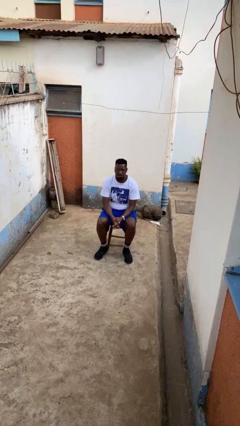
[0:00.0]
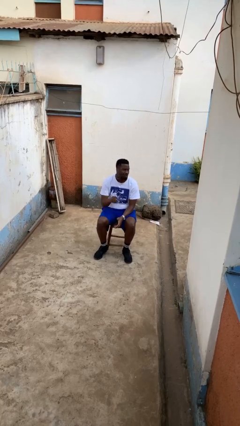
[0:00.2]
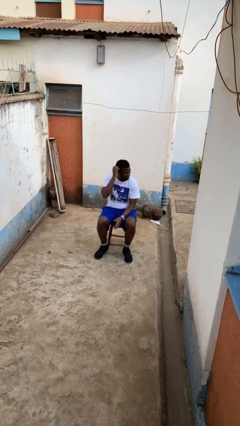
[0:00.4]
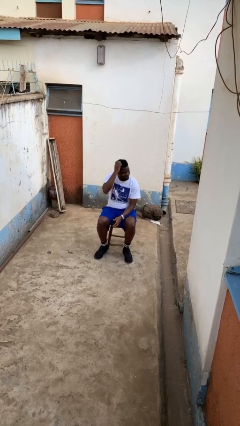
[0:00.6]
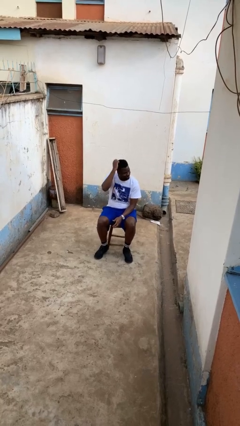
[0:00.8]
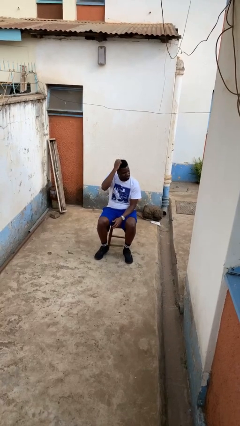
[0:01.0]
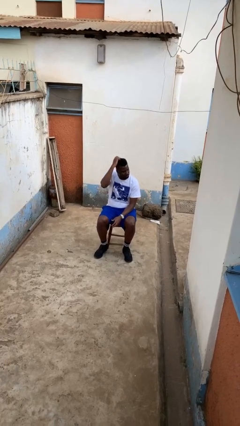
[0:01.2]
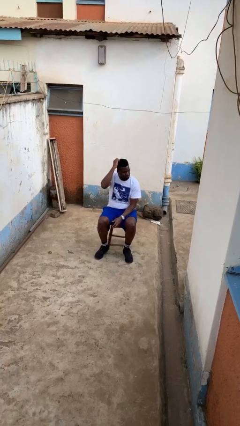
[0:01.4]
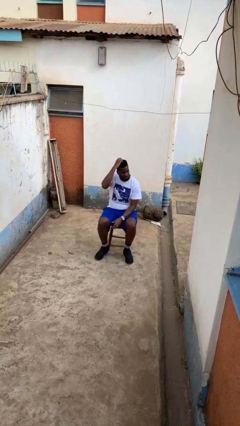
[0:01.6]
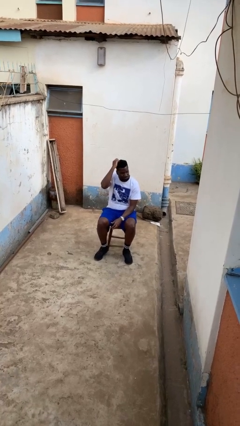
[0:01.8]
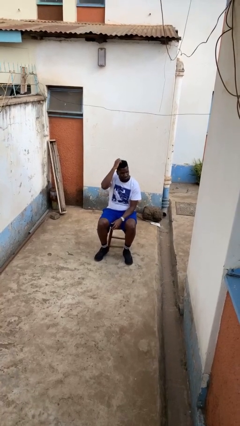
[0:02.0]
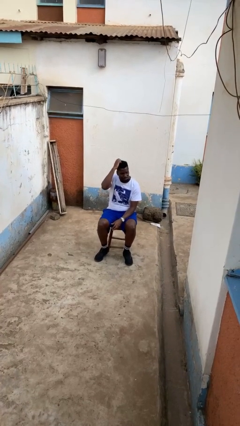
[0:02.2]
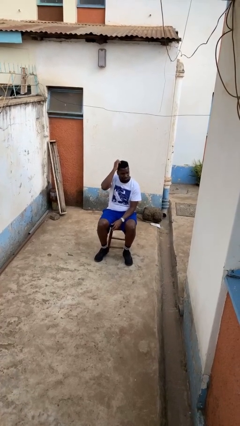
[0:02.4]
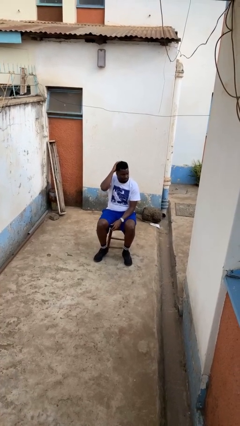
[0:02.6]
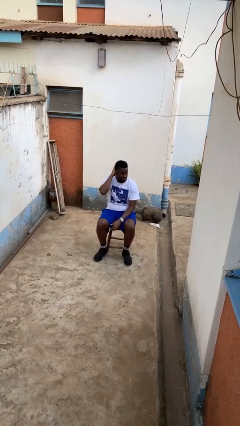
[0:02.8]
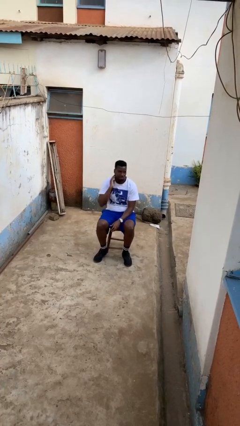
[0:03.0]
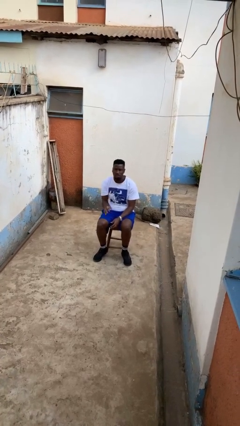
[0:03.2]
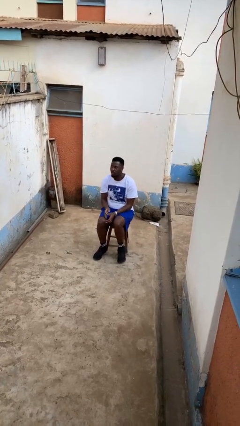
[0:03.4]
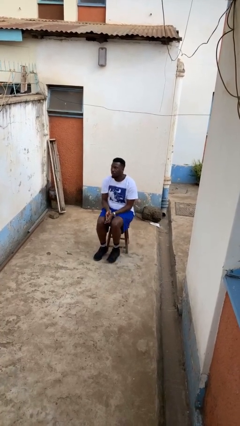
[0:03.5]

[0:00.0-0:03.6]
person scratches face

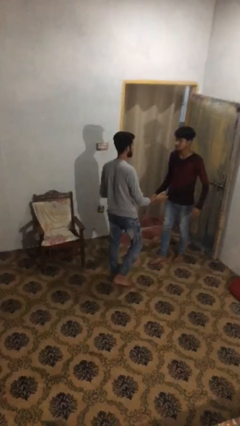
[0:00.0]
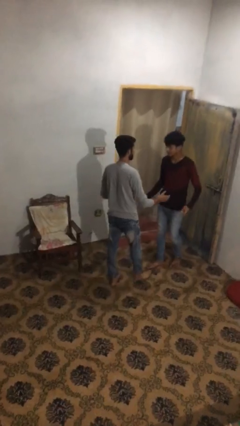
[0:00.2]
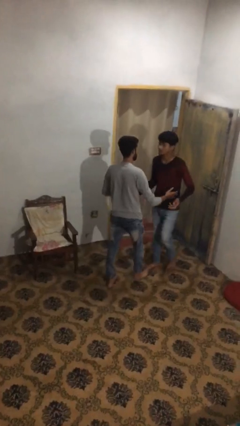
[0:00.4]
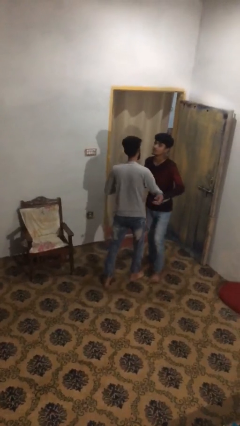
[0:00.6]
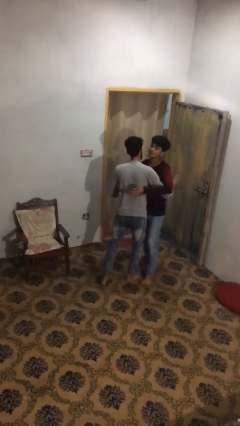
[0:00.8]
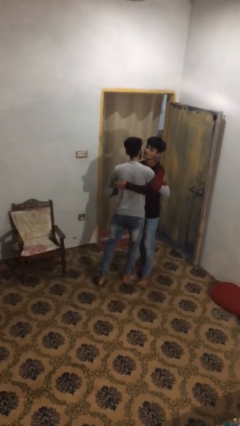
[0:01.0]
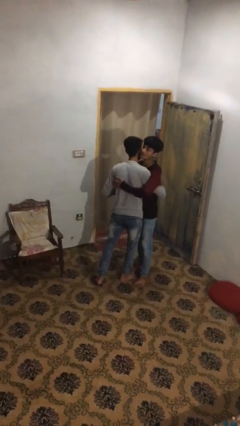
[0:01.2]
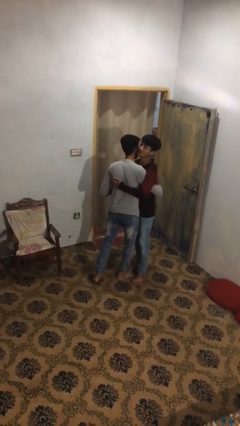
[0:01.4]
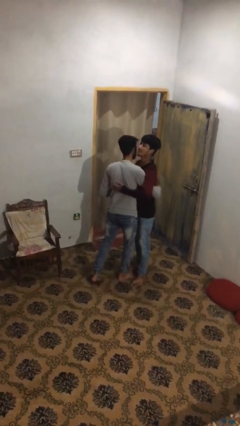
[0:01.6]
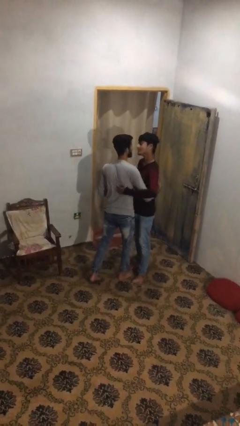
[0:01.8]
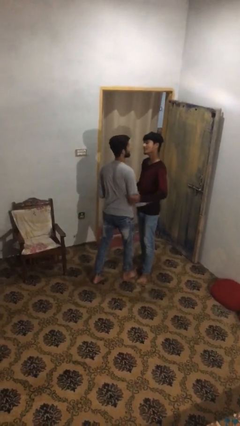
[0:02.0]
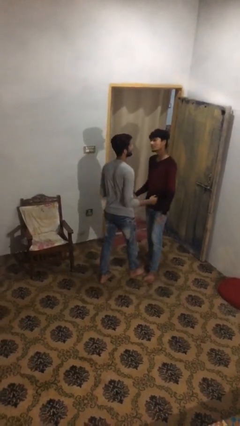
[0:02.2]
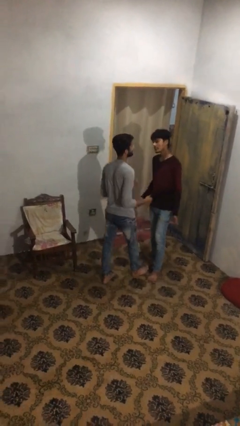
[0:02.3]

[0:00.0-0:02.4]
person embraces person

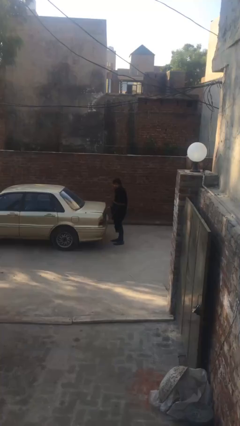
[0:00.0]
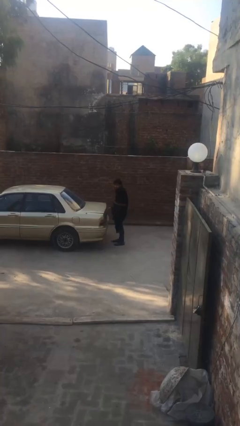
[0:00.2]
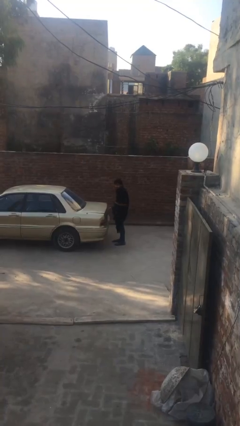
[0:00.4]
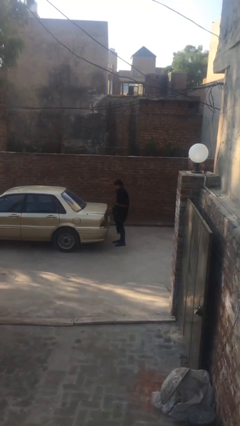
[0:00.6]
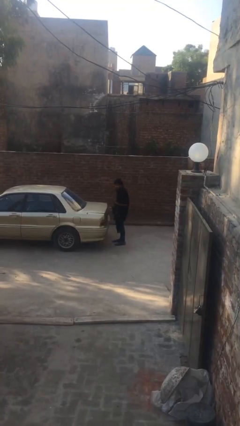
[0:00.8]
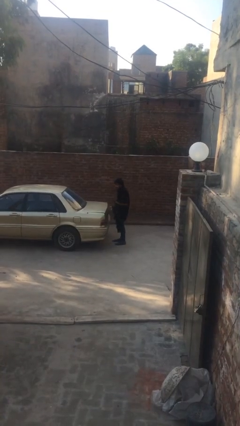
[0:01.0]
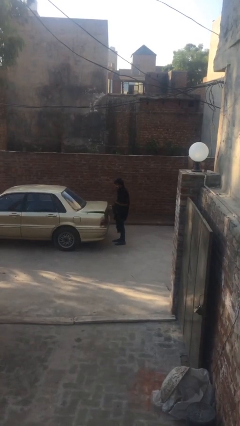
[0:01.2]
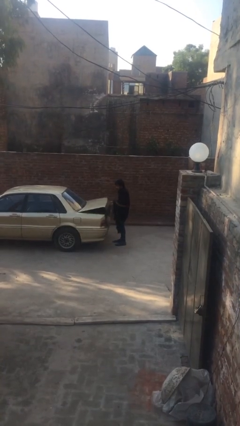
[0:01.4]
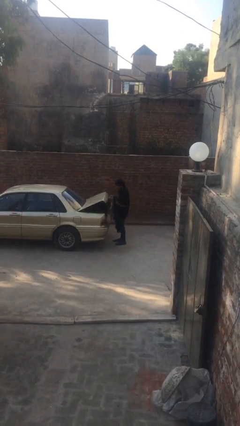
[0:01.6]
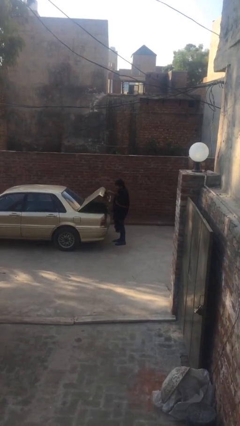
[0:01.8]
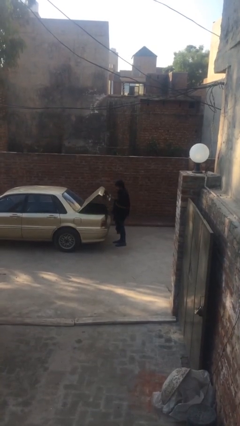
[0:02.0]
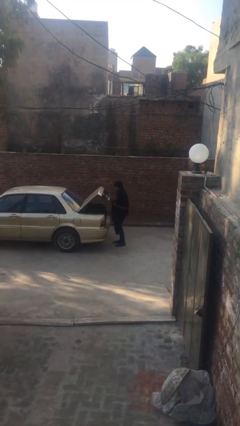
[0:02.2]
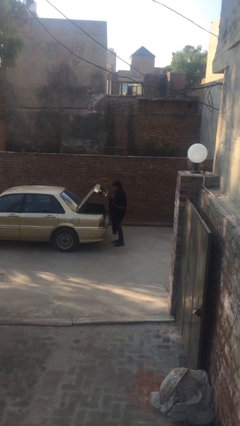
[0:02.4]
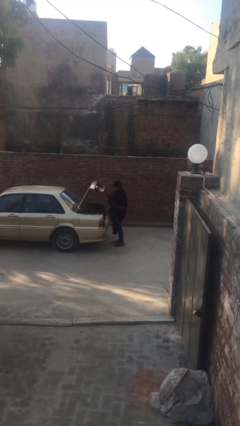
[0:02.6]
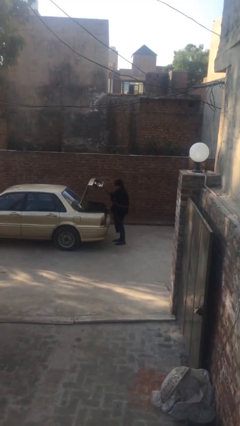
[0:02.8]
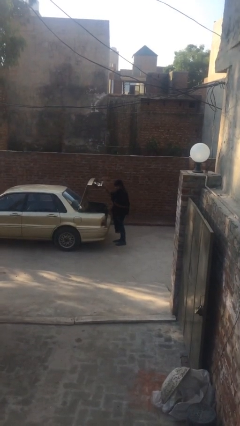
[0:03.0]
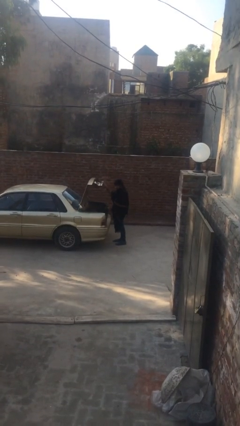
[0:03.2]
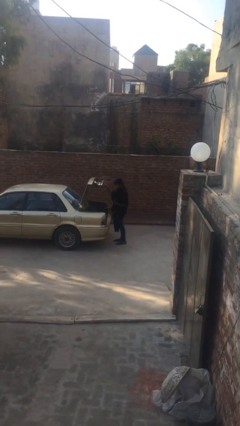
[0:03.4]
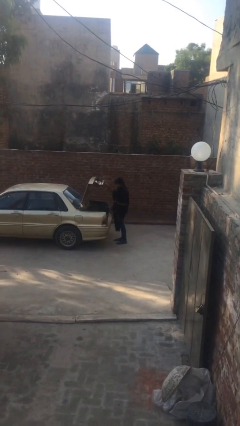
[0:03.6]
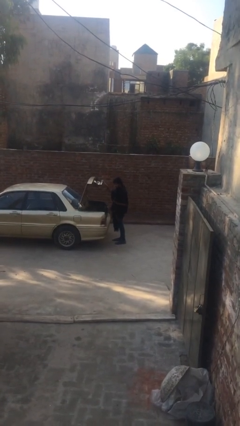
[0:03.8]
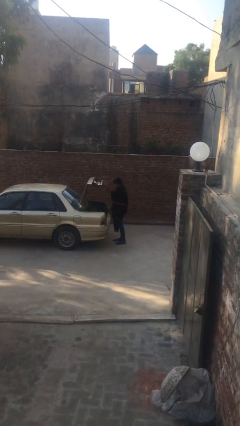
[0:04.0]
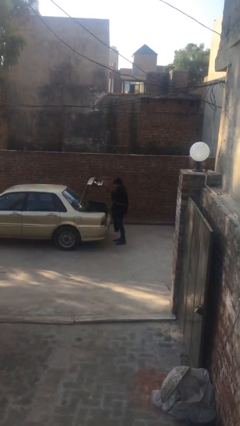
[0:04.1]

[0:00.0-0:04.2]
person opens car trunk

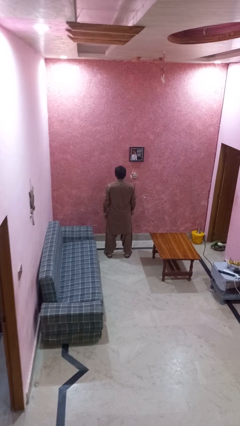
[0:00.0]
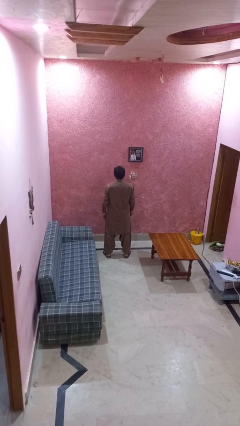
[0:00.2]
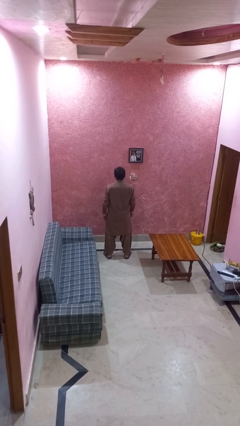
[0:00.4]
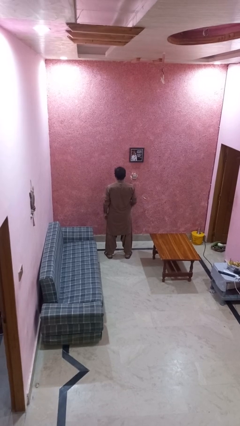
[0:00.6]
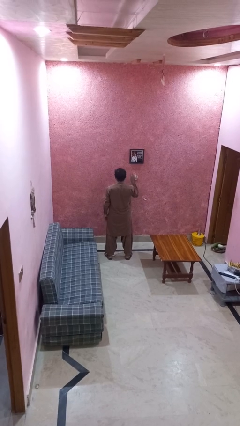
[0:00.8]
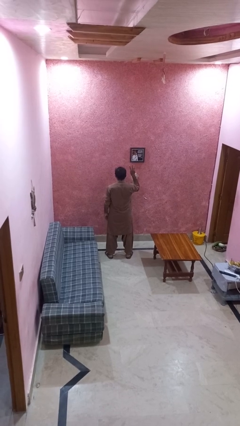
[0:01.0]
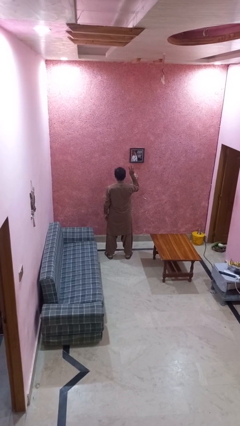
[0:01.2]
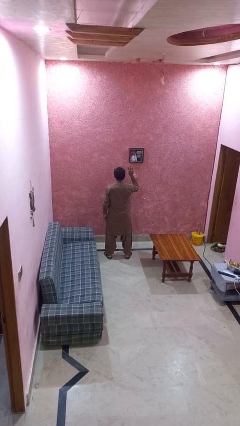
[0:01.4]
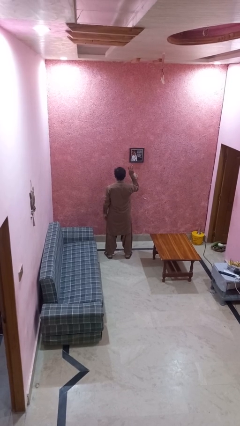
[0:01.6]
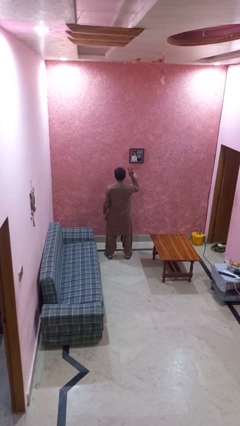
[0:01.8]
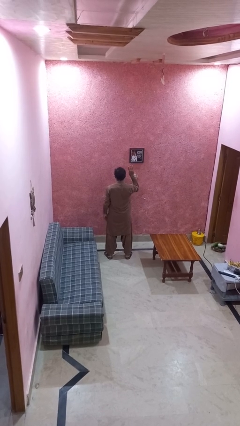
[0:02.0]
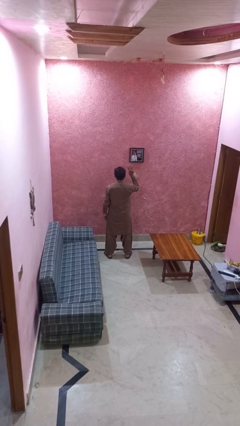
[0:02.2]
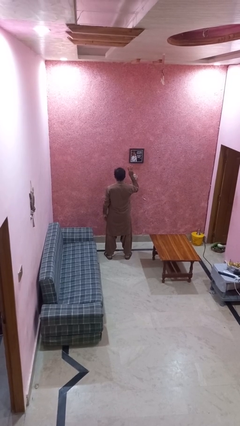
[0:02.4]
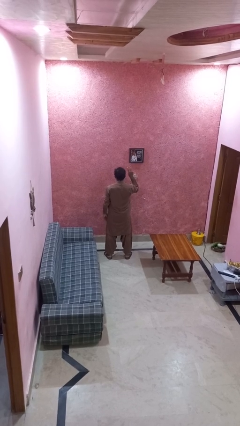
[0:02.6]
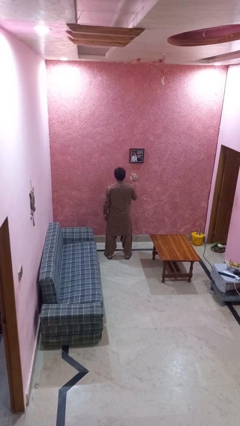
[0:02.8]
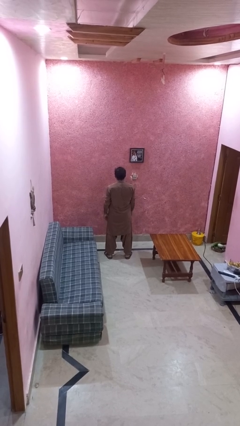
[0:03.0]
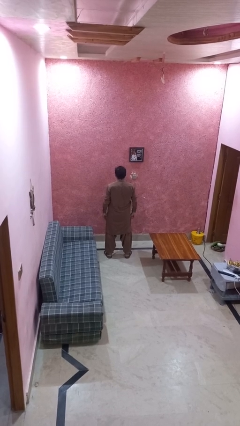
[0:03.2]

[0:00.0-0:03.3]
person gestures number three

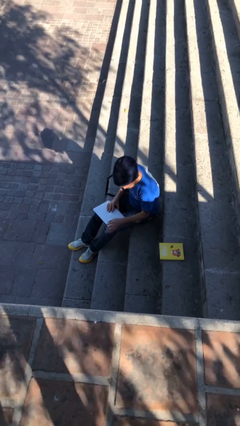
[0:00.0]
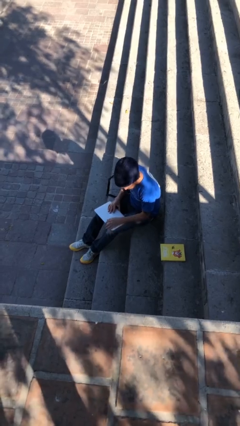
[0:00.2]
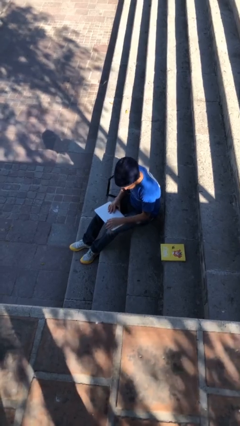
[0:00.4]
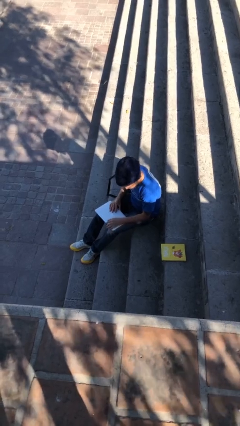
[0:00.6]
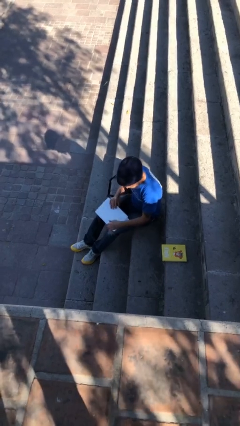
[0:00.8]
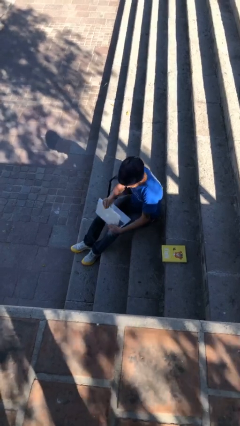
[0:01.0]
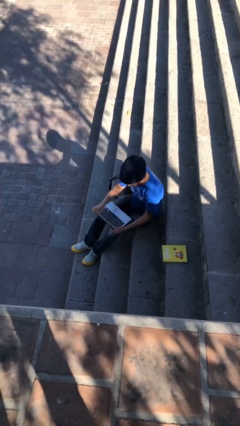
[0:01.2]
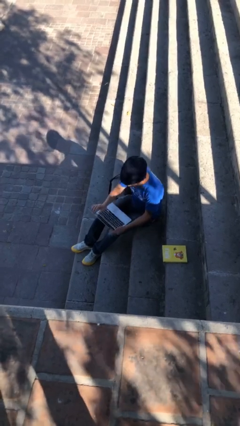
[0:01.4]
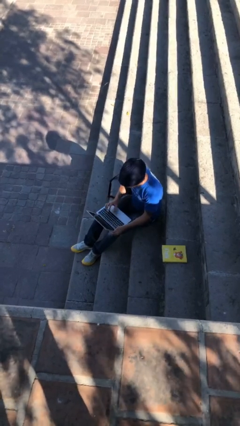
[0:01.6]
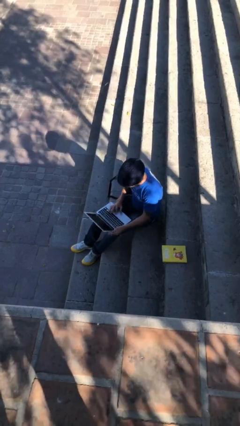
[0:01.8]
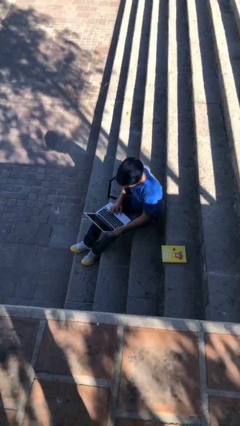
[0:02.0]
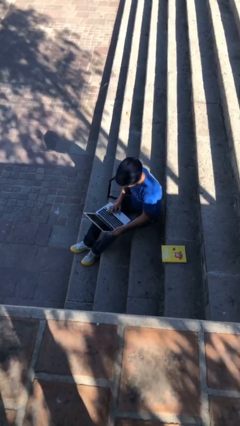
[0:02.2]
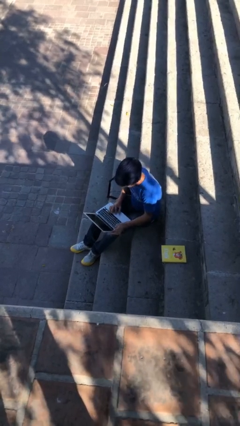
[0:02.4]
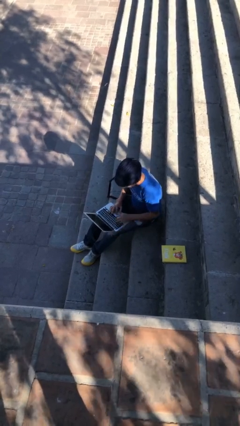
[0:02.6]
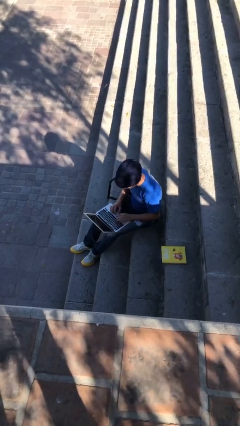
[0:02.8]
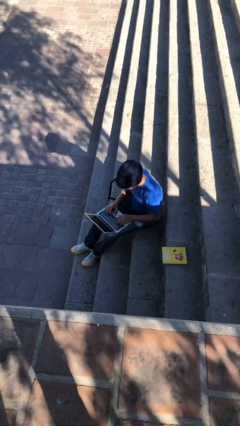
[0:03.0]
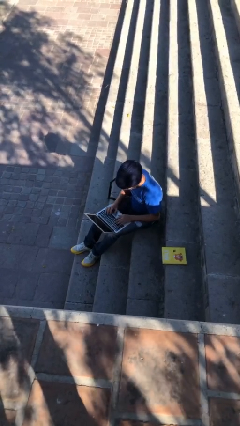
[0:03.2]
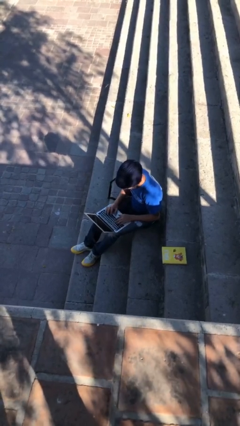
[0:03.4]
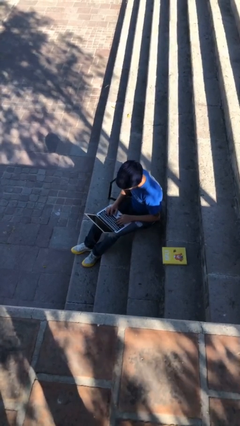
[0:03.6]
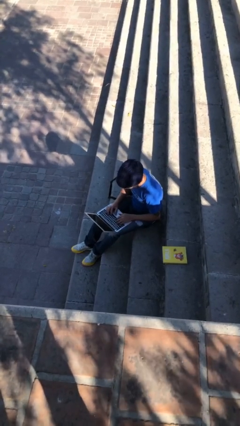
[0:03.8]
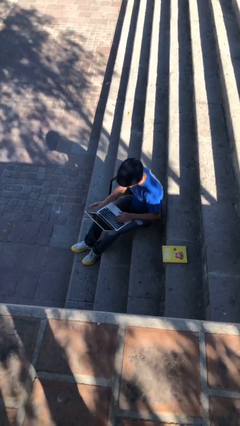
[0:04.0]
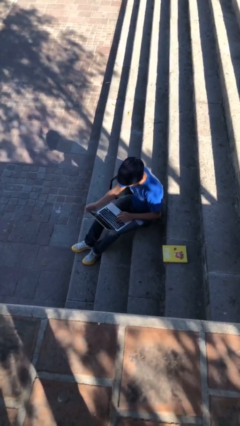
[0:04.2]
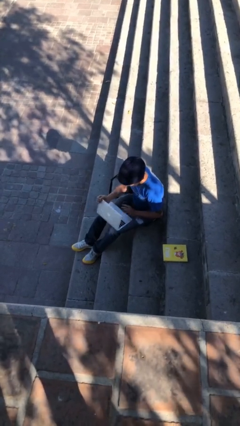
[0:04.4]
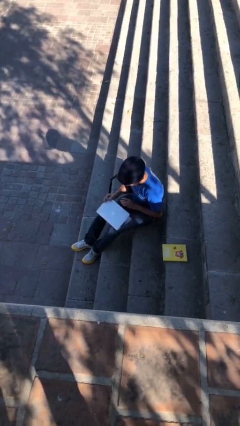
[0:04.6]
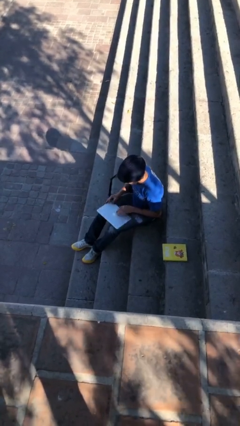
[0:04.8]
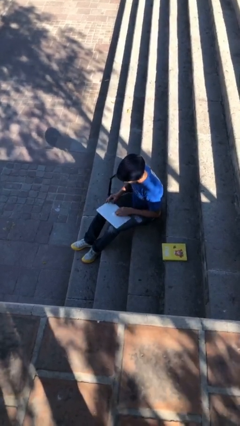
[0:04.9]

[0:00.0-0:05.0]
person interacts with laptop
